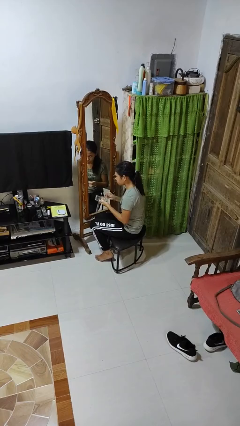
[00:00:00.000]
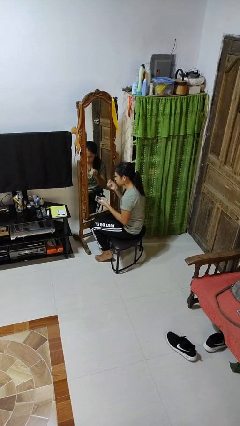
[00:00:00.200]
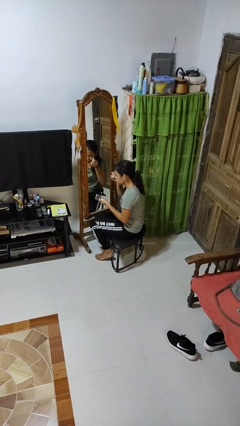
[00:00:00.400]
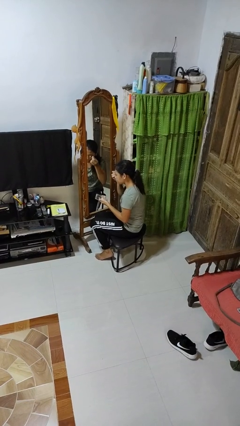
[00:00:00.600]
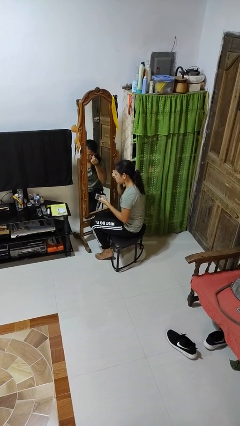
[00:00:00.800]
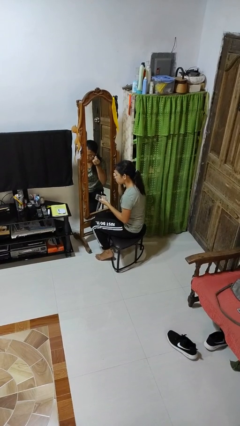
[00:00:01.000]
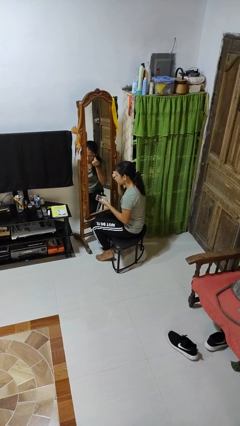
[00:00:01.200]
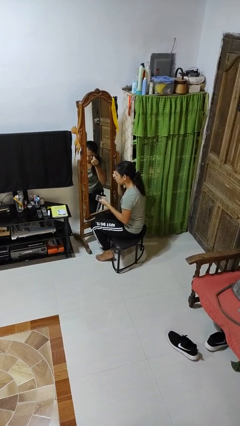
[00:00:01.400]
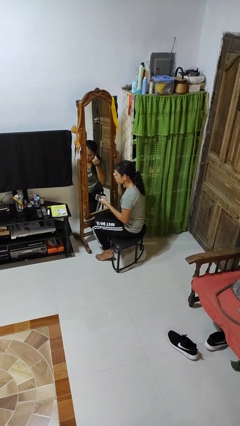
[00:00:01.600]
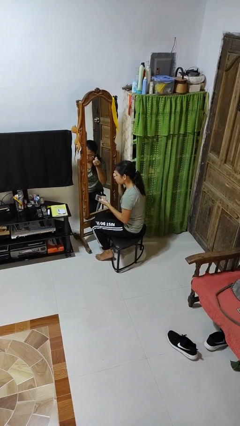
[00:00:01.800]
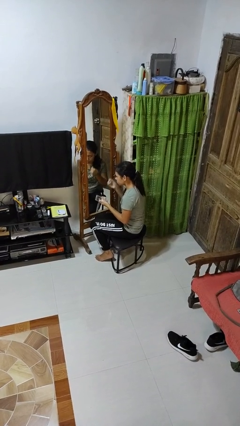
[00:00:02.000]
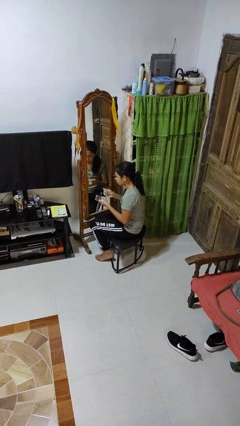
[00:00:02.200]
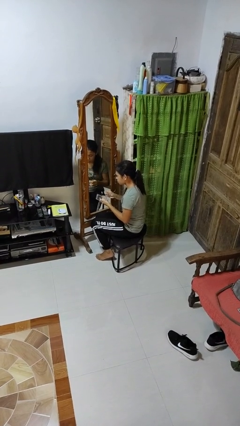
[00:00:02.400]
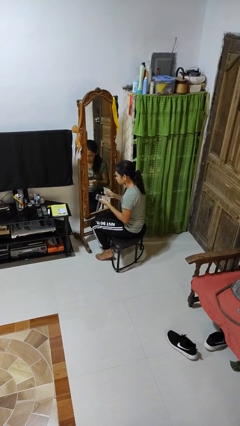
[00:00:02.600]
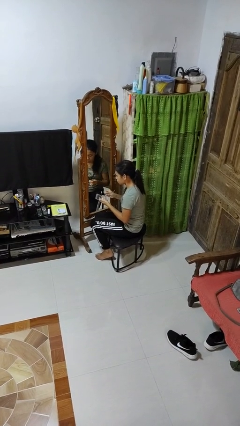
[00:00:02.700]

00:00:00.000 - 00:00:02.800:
person applies eye makeup

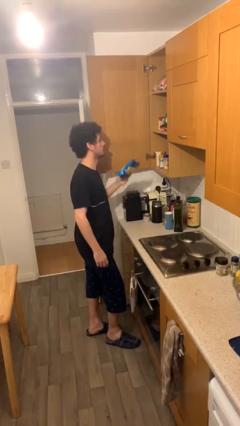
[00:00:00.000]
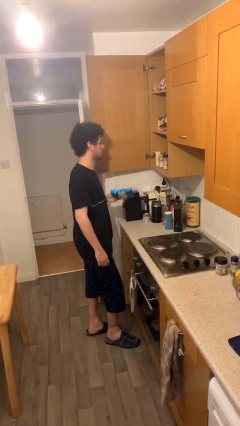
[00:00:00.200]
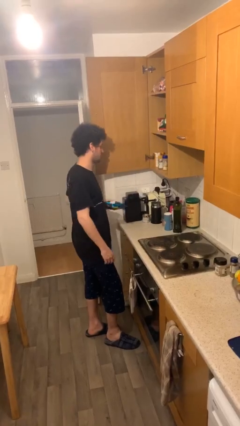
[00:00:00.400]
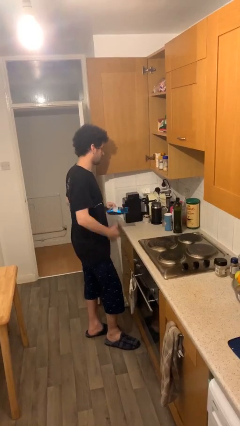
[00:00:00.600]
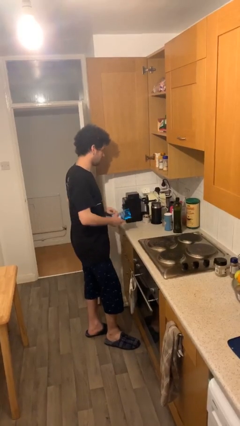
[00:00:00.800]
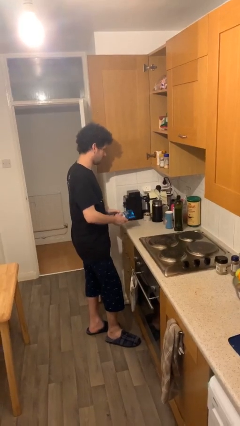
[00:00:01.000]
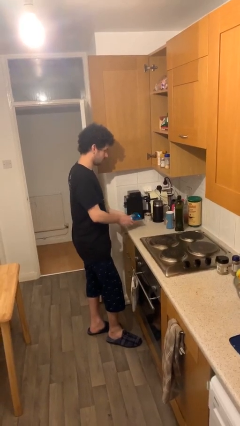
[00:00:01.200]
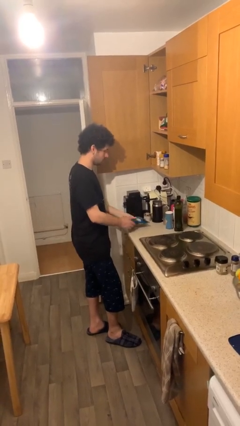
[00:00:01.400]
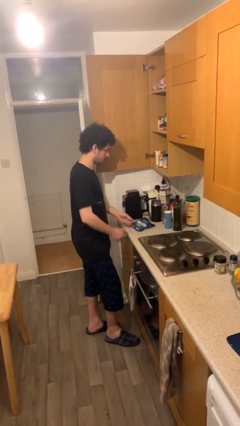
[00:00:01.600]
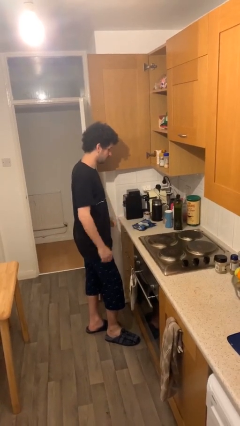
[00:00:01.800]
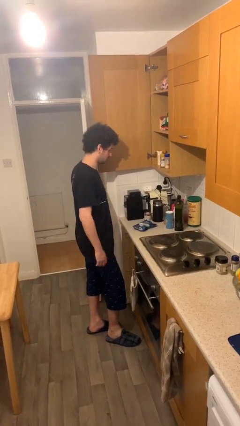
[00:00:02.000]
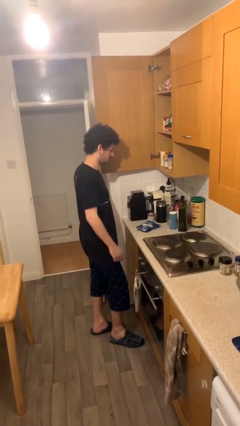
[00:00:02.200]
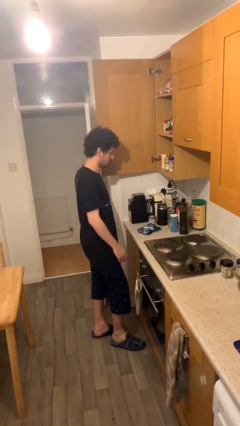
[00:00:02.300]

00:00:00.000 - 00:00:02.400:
person puts down object on table

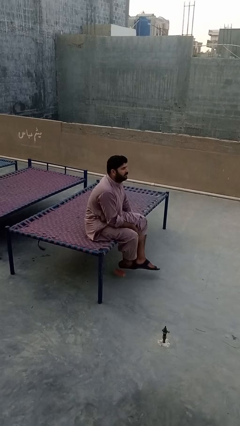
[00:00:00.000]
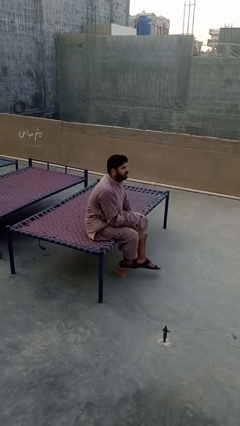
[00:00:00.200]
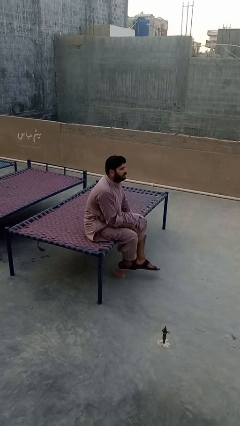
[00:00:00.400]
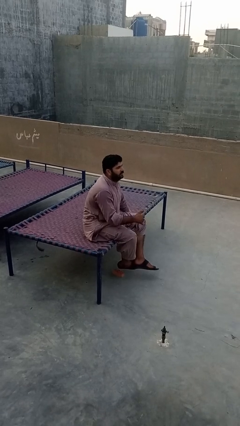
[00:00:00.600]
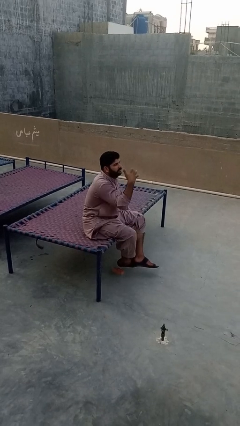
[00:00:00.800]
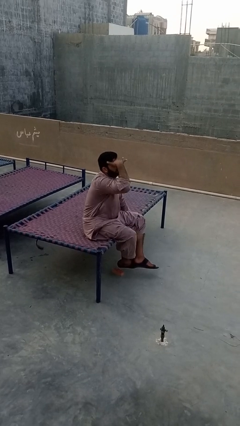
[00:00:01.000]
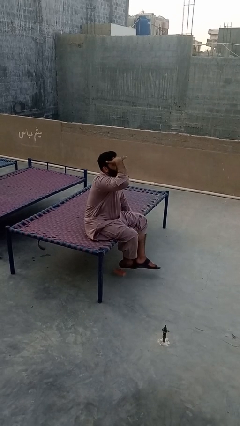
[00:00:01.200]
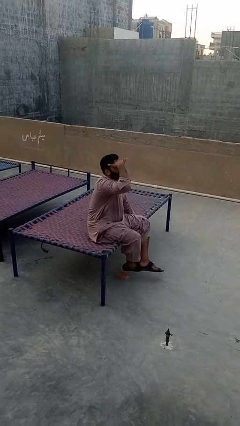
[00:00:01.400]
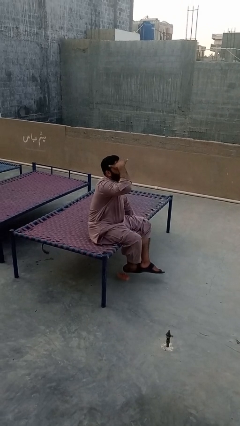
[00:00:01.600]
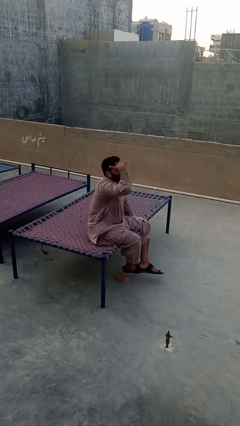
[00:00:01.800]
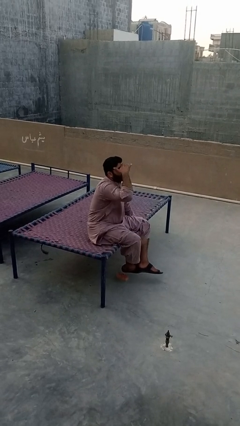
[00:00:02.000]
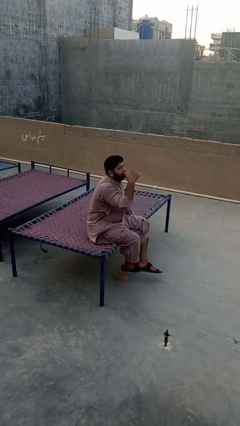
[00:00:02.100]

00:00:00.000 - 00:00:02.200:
person shades eyes

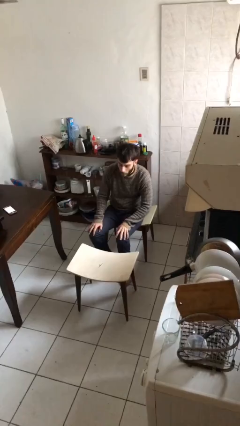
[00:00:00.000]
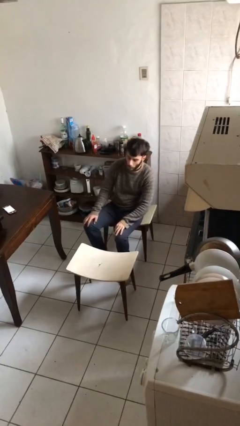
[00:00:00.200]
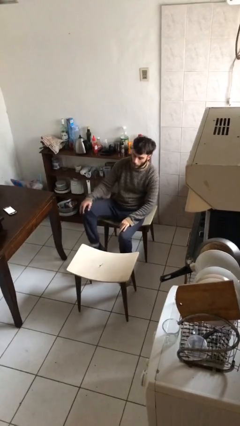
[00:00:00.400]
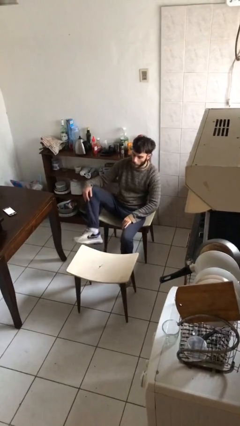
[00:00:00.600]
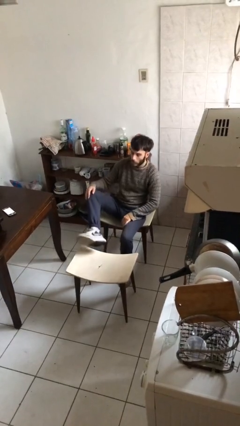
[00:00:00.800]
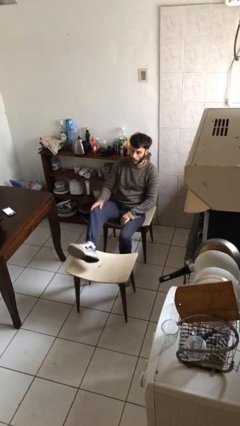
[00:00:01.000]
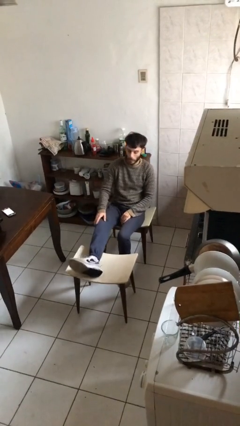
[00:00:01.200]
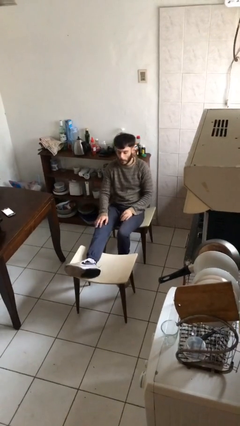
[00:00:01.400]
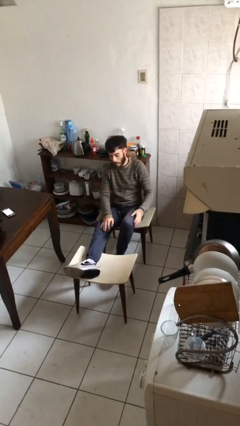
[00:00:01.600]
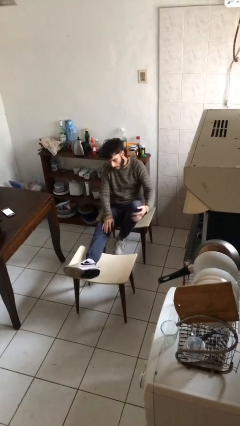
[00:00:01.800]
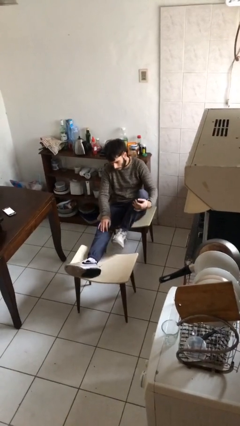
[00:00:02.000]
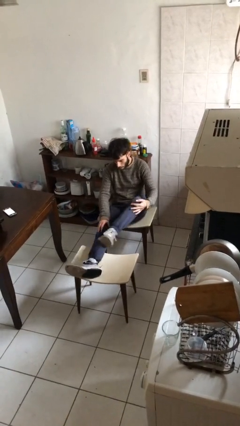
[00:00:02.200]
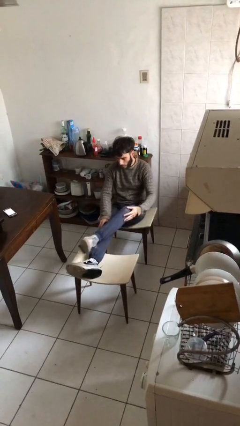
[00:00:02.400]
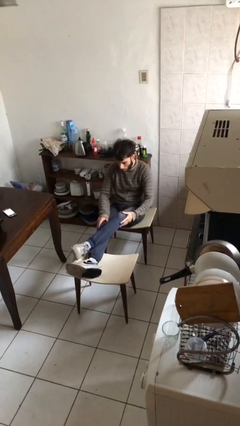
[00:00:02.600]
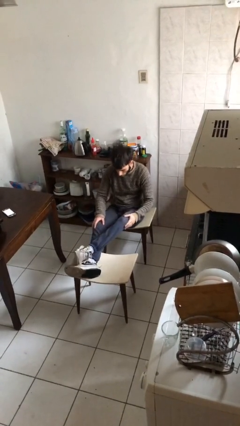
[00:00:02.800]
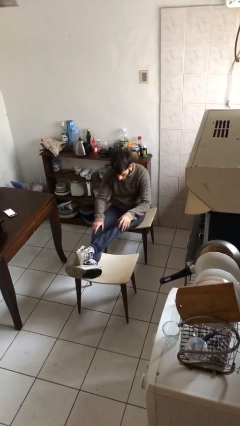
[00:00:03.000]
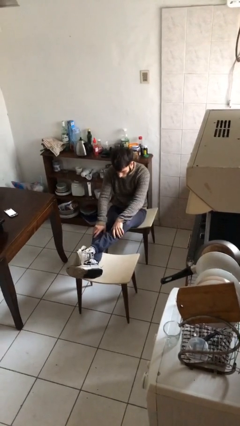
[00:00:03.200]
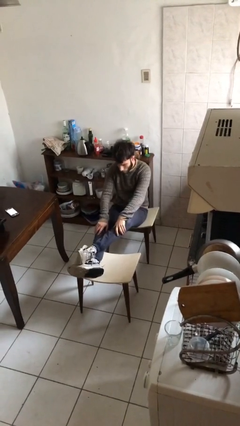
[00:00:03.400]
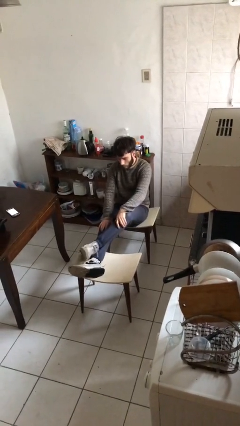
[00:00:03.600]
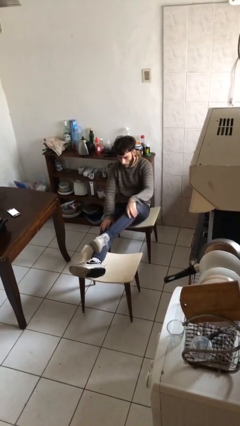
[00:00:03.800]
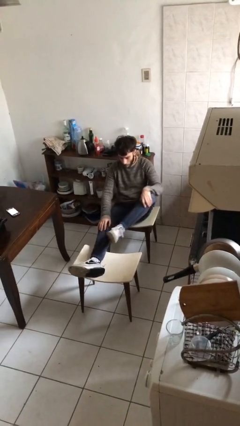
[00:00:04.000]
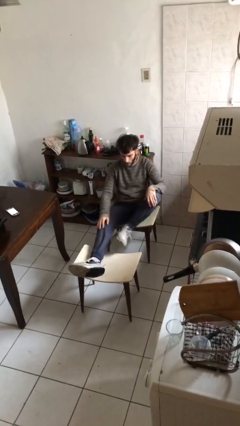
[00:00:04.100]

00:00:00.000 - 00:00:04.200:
person puts feet up

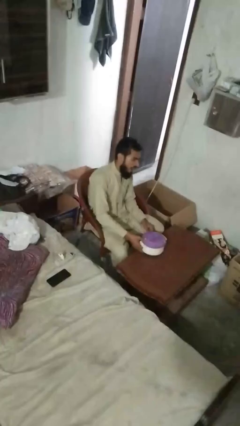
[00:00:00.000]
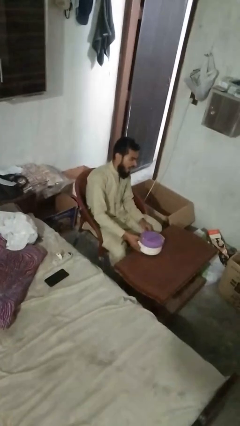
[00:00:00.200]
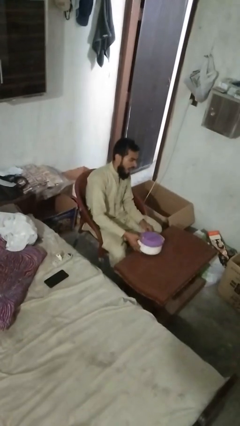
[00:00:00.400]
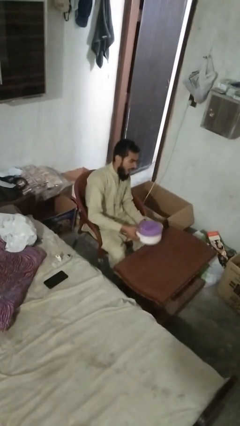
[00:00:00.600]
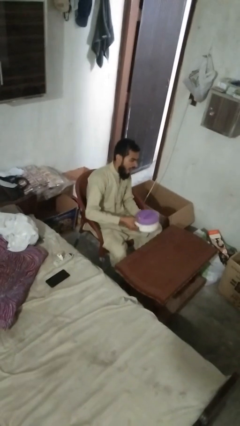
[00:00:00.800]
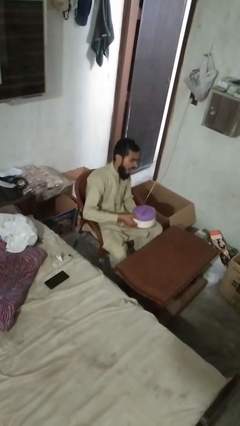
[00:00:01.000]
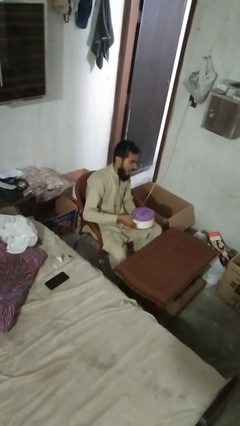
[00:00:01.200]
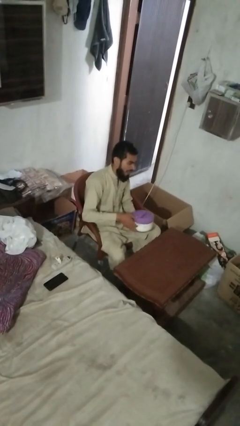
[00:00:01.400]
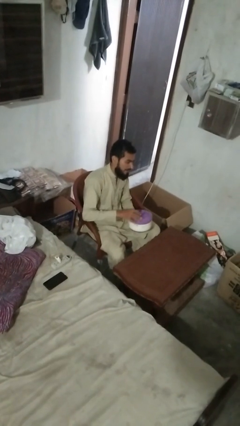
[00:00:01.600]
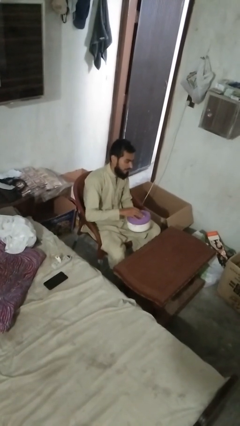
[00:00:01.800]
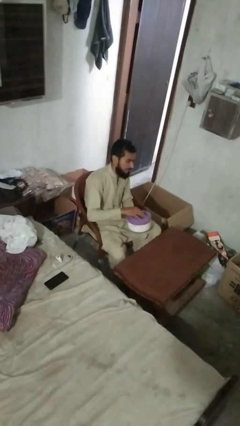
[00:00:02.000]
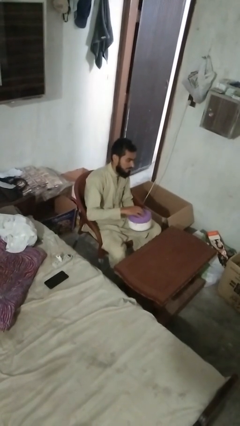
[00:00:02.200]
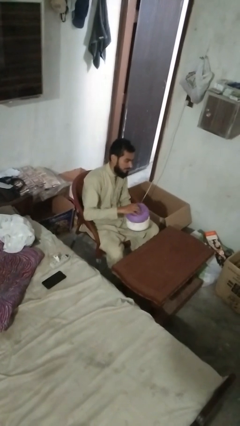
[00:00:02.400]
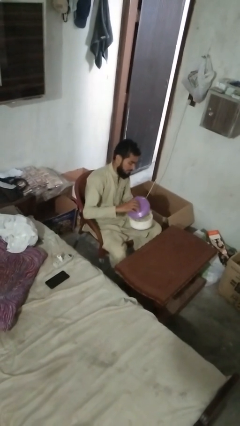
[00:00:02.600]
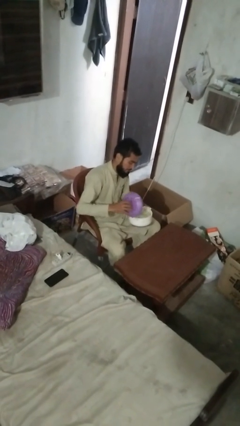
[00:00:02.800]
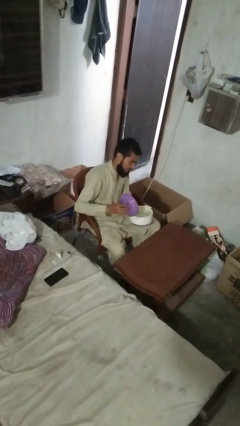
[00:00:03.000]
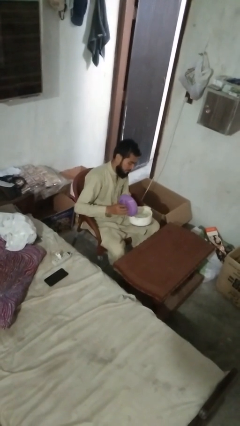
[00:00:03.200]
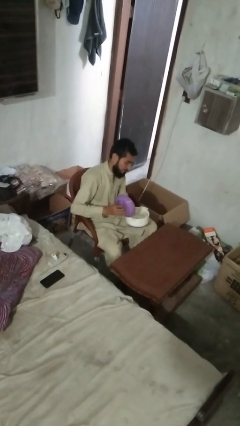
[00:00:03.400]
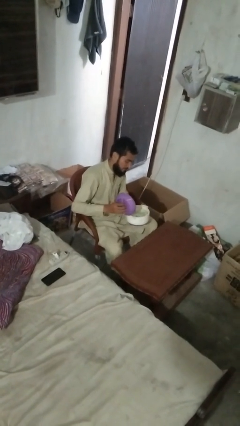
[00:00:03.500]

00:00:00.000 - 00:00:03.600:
person puts on apron

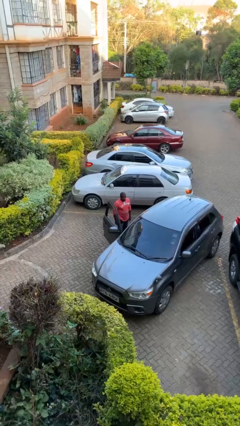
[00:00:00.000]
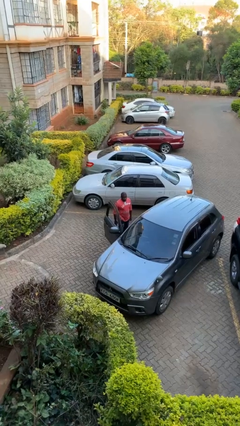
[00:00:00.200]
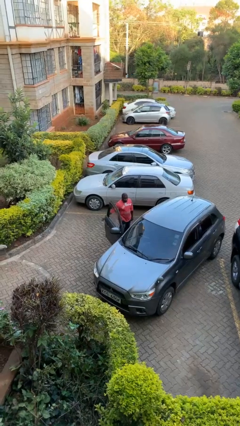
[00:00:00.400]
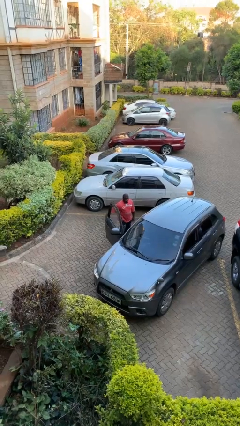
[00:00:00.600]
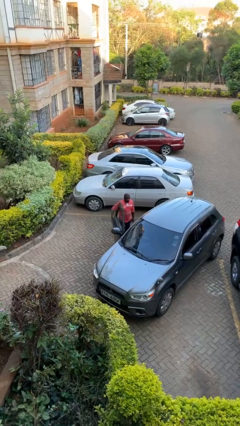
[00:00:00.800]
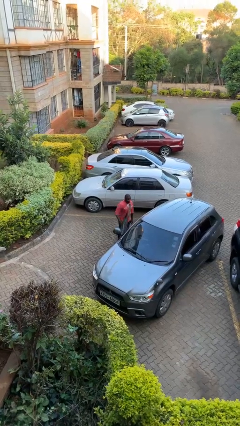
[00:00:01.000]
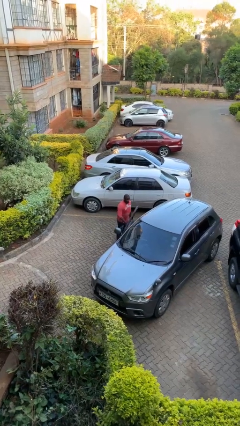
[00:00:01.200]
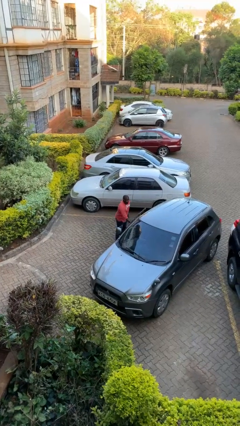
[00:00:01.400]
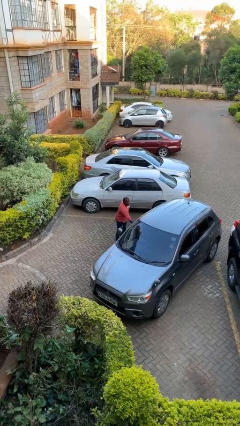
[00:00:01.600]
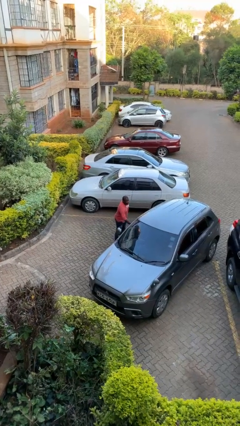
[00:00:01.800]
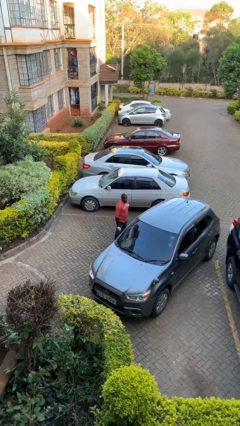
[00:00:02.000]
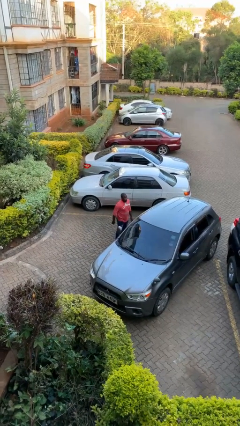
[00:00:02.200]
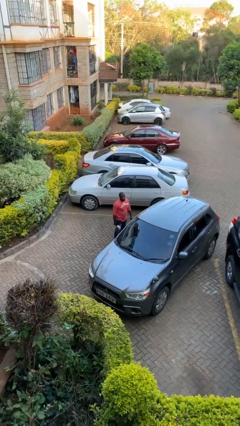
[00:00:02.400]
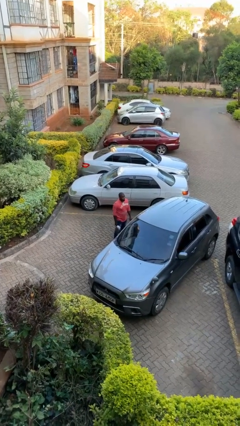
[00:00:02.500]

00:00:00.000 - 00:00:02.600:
person closes car door
